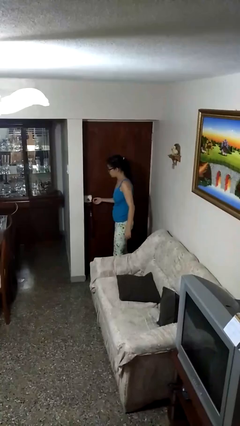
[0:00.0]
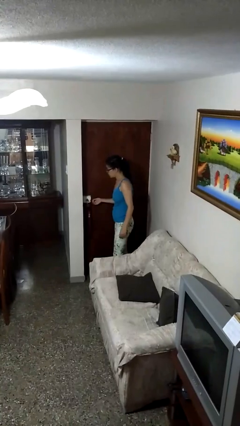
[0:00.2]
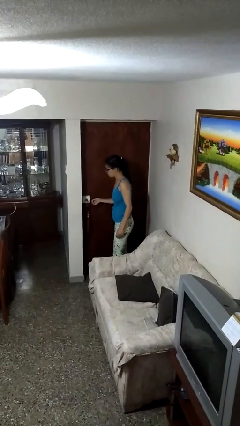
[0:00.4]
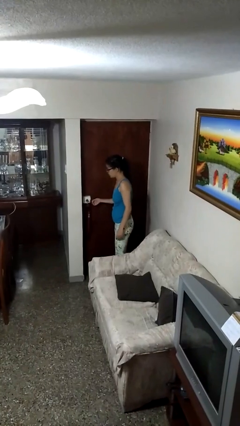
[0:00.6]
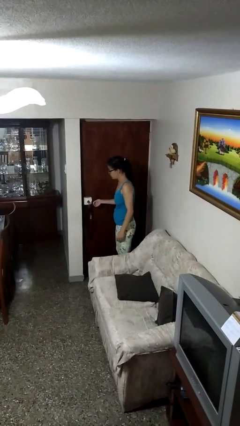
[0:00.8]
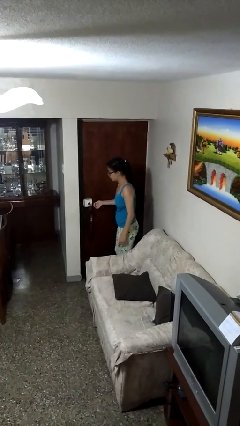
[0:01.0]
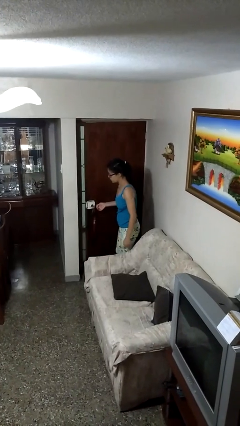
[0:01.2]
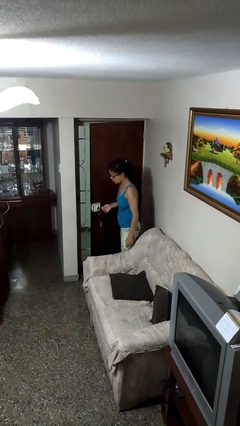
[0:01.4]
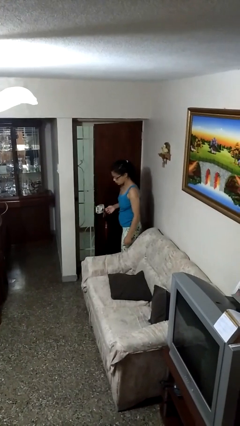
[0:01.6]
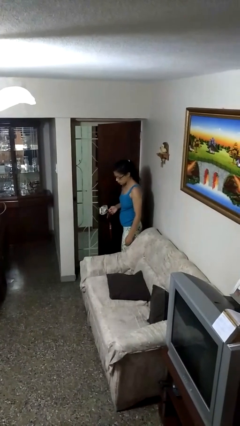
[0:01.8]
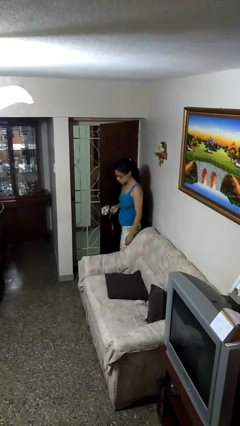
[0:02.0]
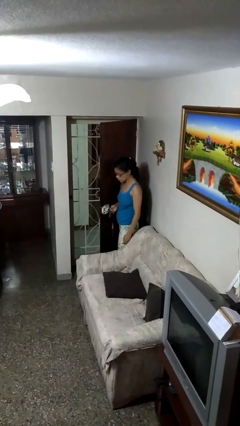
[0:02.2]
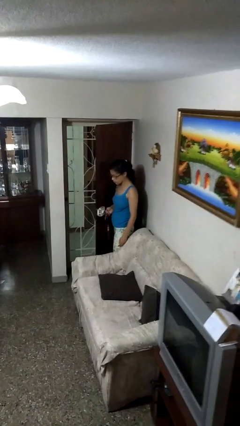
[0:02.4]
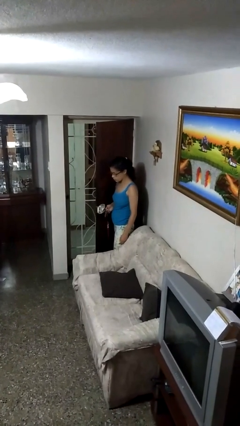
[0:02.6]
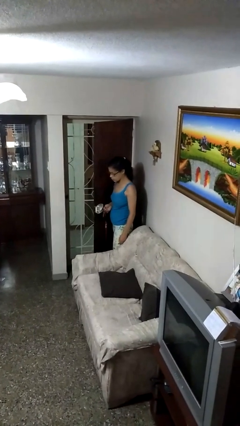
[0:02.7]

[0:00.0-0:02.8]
person opens facility door

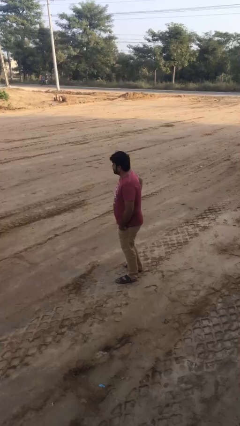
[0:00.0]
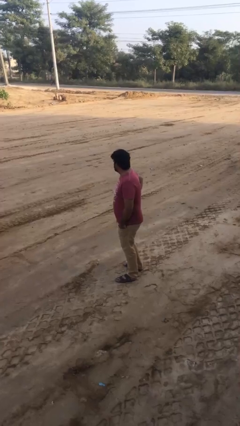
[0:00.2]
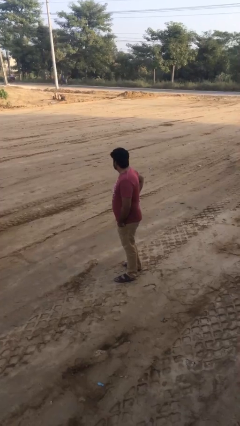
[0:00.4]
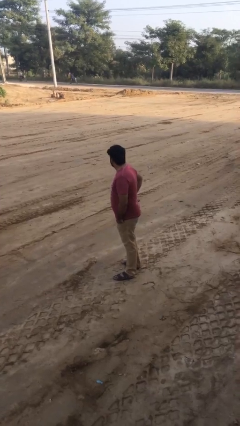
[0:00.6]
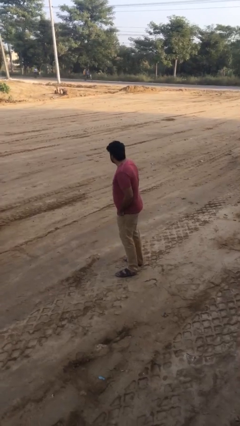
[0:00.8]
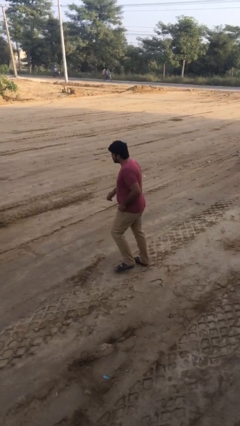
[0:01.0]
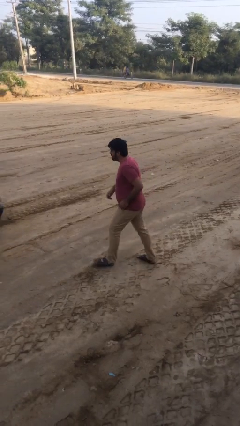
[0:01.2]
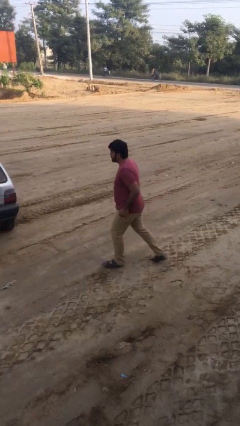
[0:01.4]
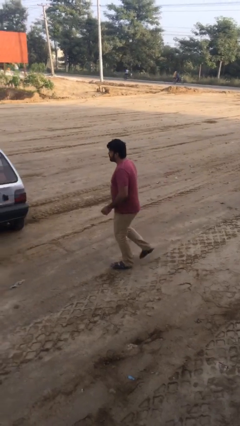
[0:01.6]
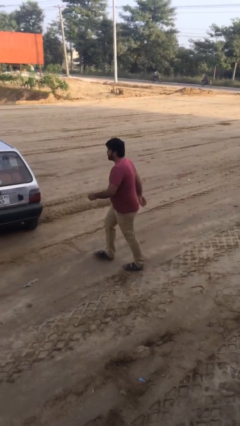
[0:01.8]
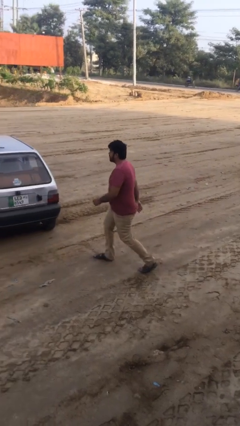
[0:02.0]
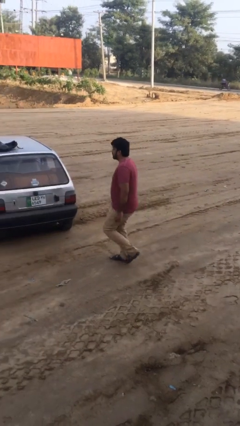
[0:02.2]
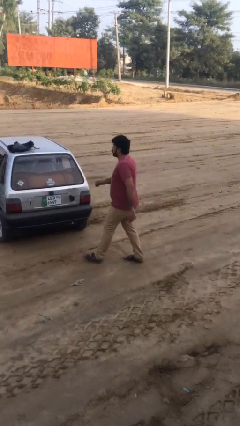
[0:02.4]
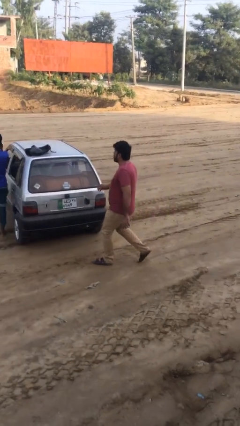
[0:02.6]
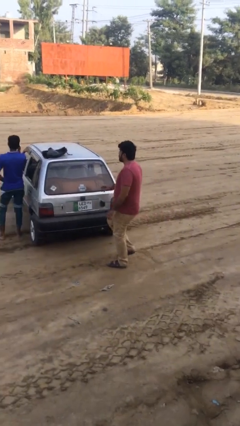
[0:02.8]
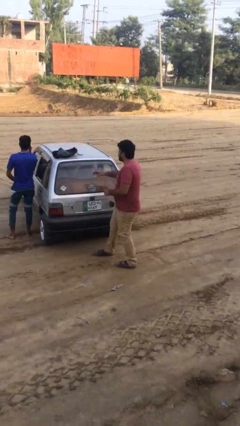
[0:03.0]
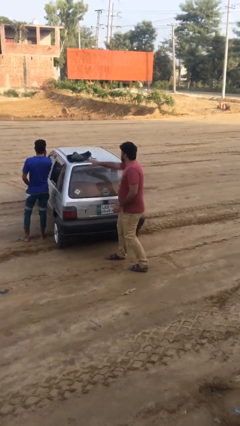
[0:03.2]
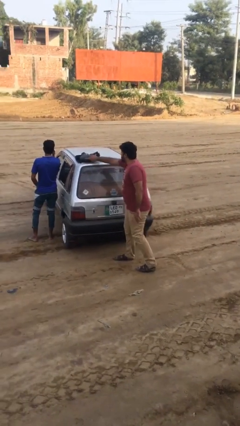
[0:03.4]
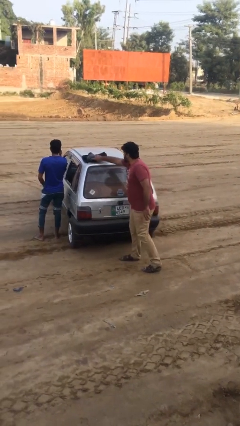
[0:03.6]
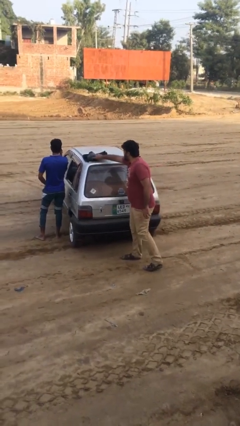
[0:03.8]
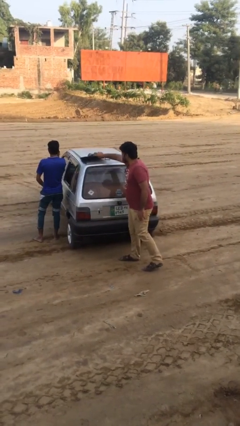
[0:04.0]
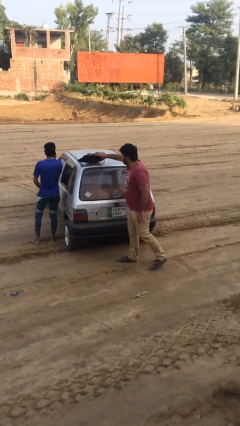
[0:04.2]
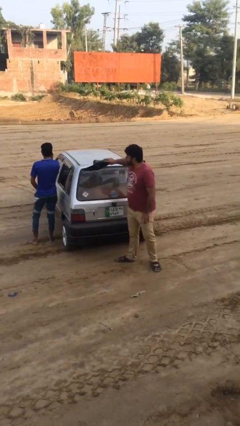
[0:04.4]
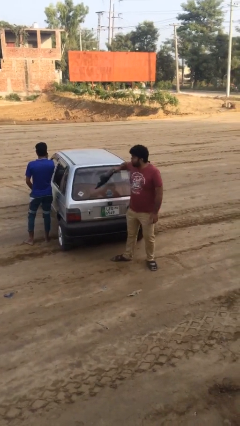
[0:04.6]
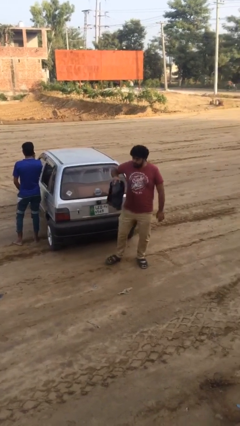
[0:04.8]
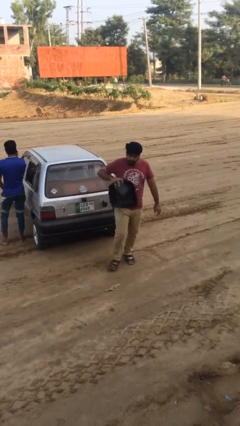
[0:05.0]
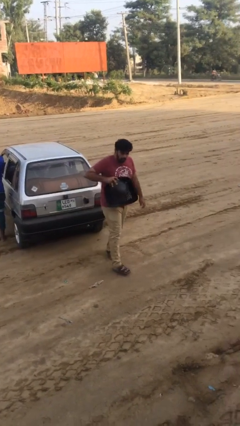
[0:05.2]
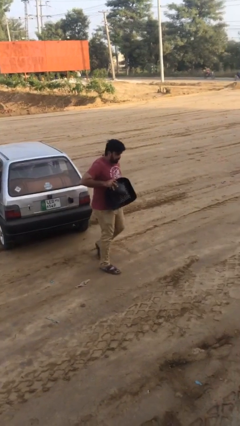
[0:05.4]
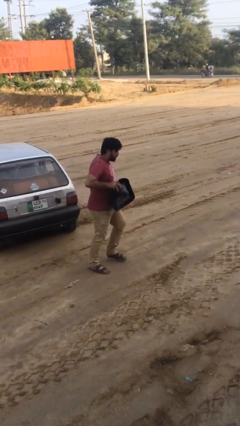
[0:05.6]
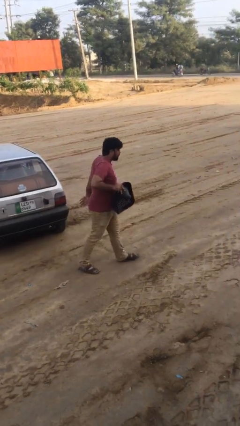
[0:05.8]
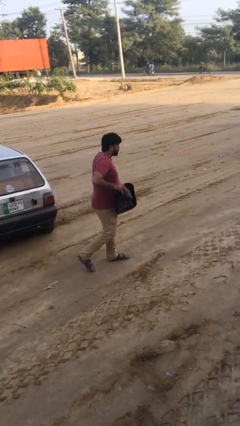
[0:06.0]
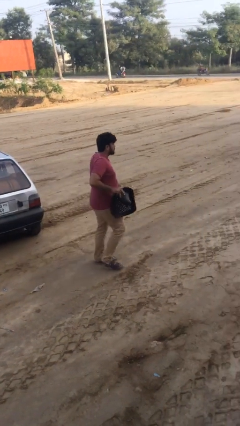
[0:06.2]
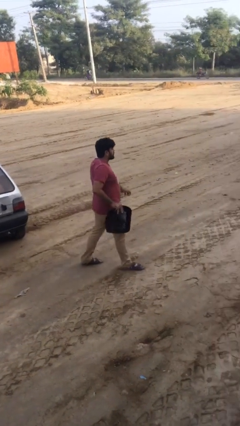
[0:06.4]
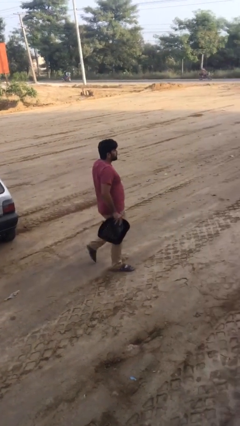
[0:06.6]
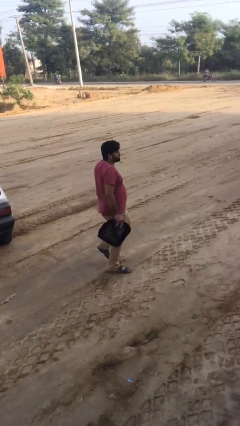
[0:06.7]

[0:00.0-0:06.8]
person steals object from person

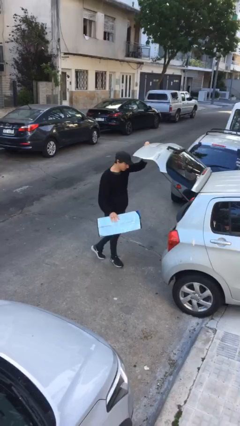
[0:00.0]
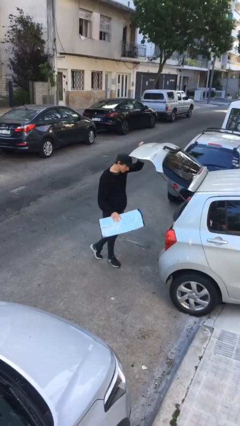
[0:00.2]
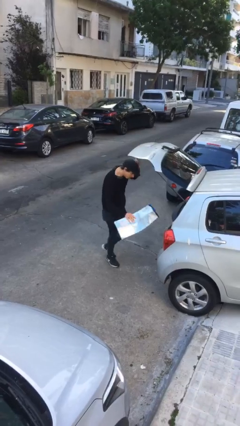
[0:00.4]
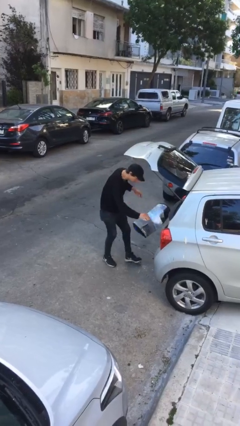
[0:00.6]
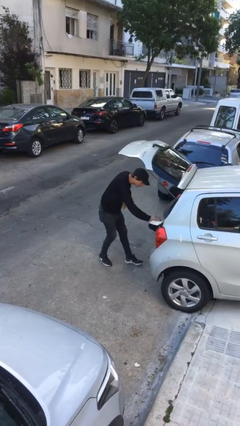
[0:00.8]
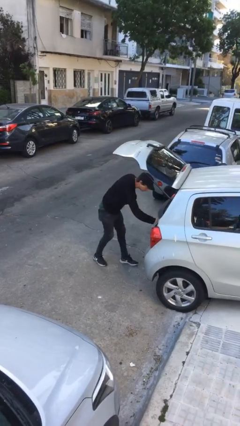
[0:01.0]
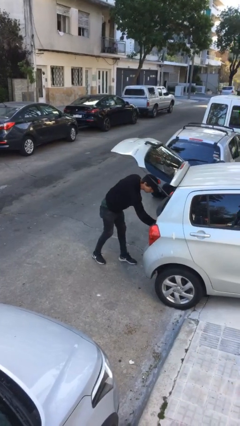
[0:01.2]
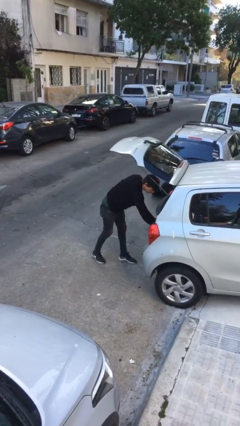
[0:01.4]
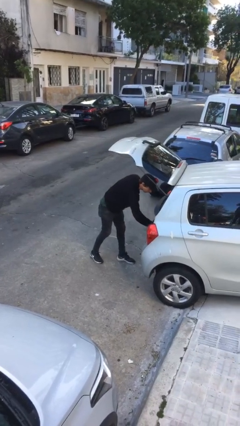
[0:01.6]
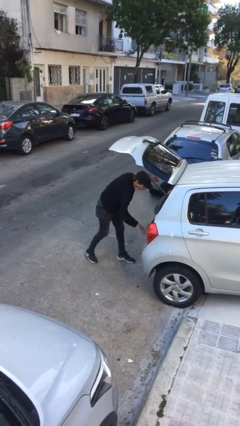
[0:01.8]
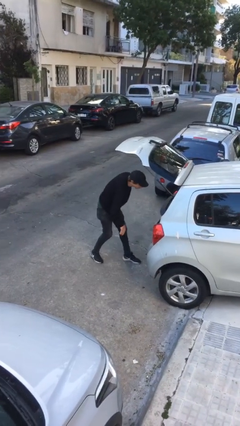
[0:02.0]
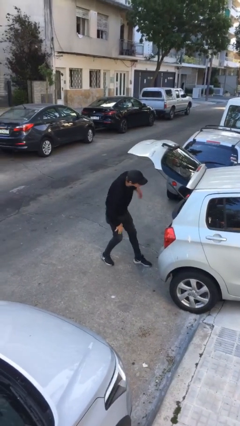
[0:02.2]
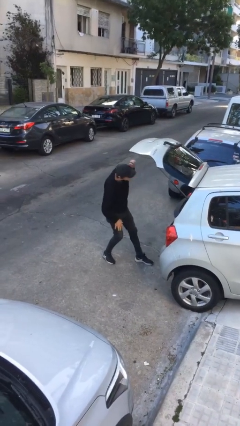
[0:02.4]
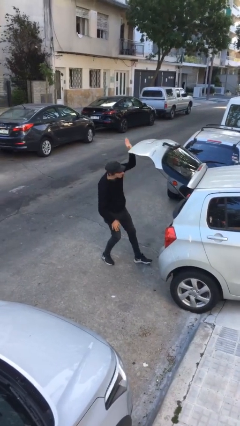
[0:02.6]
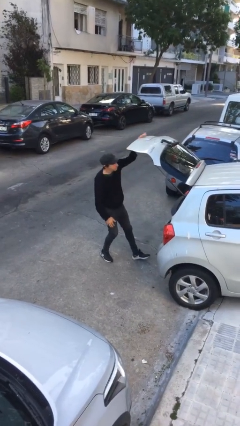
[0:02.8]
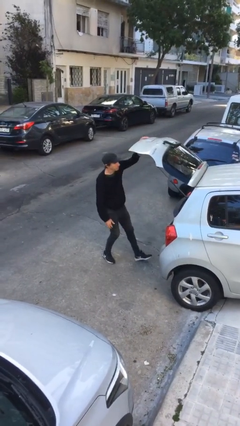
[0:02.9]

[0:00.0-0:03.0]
person loads car

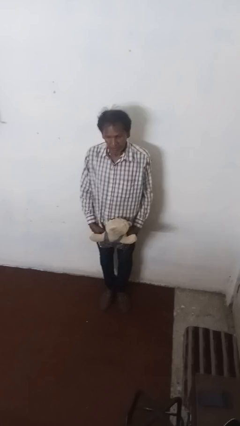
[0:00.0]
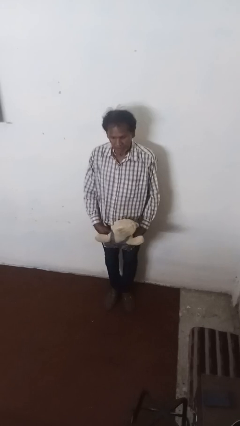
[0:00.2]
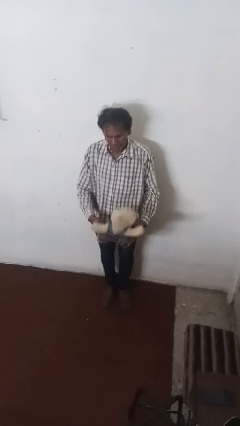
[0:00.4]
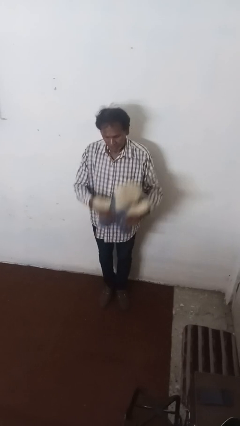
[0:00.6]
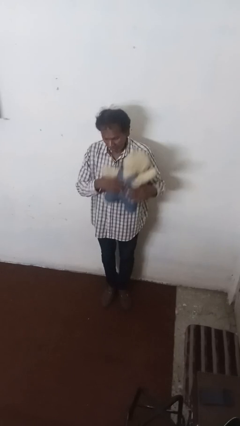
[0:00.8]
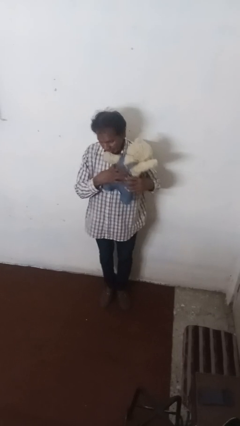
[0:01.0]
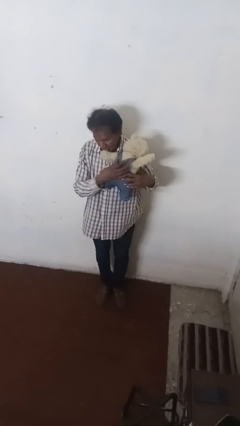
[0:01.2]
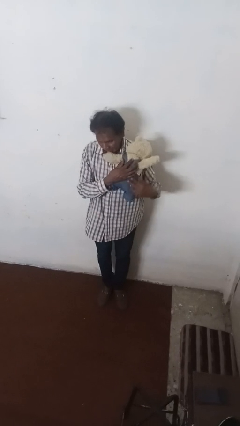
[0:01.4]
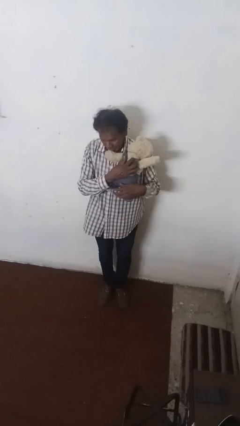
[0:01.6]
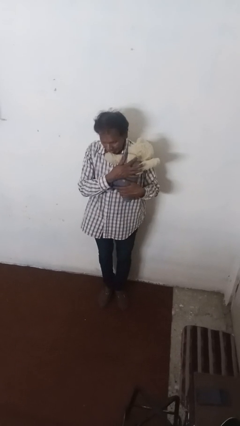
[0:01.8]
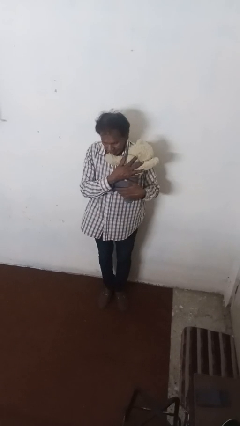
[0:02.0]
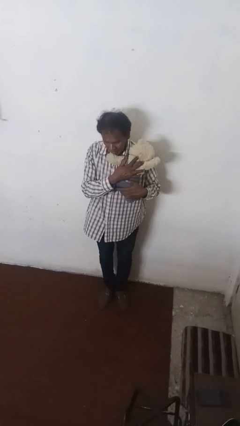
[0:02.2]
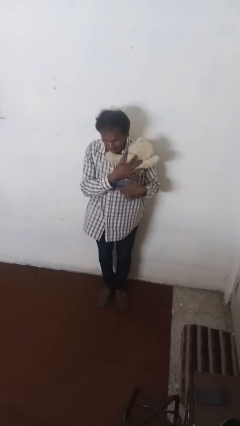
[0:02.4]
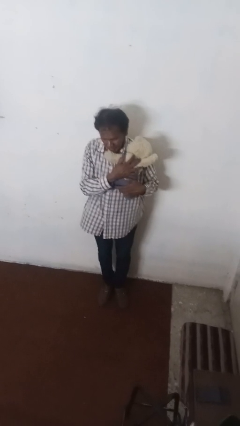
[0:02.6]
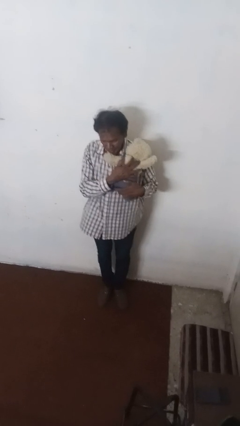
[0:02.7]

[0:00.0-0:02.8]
person hugs stuffed animal

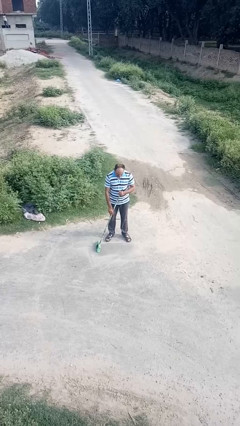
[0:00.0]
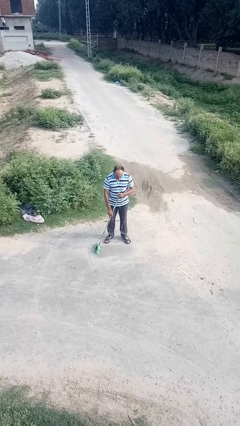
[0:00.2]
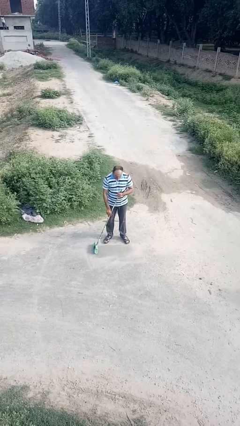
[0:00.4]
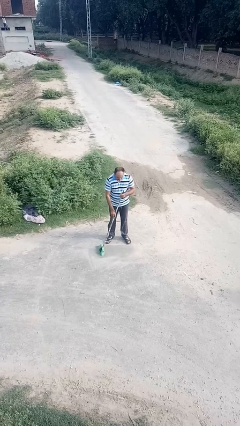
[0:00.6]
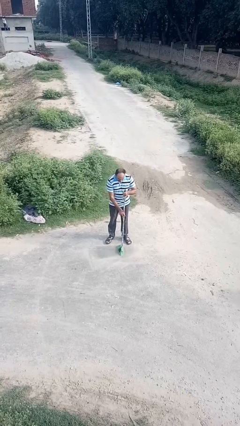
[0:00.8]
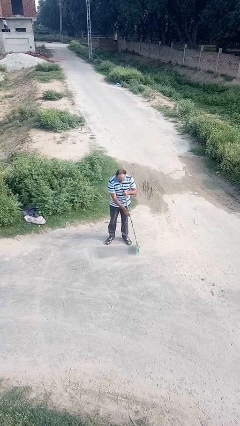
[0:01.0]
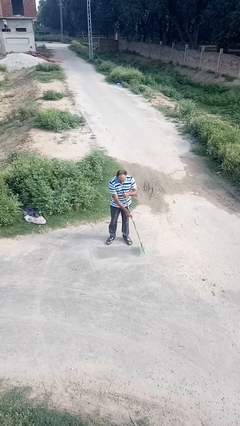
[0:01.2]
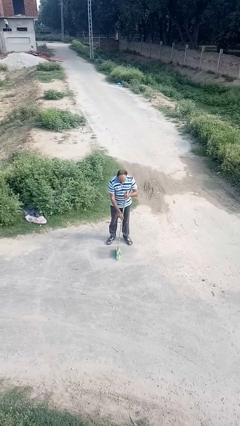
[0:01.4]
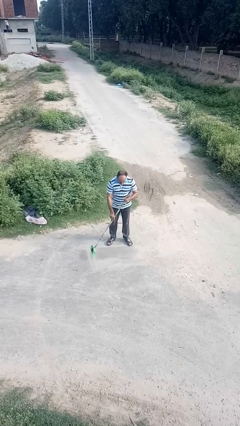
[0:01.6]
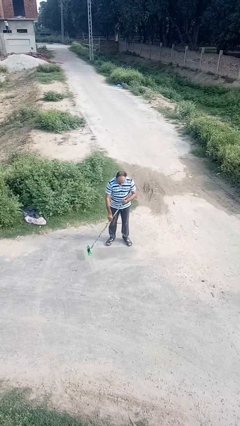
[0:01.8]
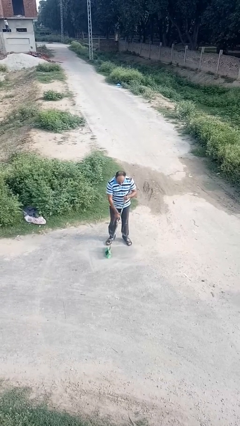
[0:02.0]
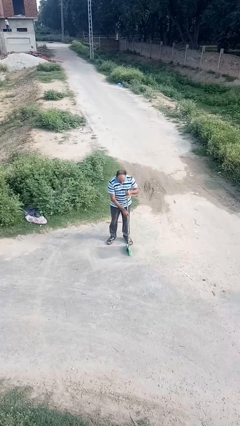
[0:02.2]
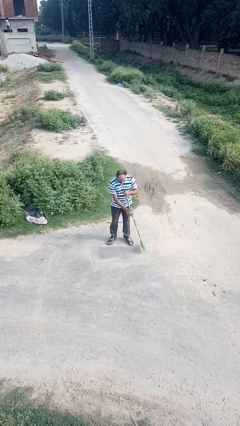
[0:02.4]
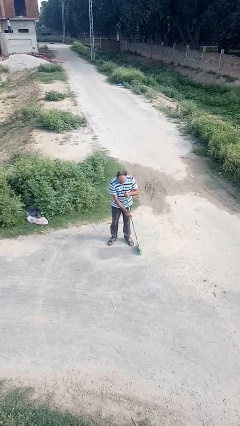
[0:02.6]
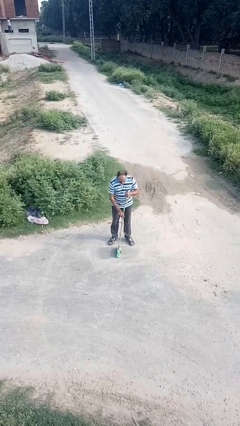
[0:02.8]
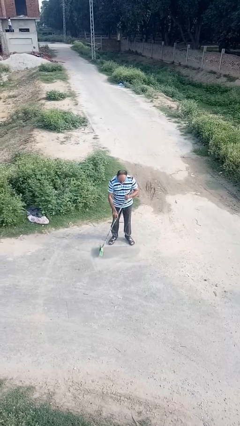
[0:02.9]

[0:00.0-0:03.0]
person sweeps floor
